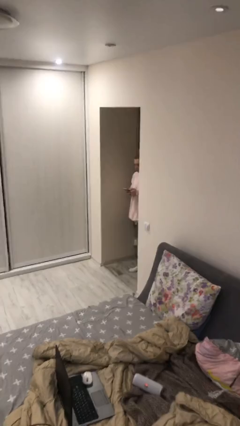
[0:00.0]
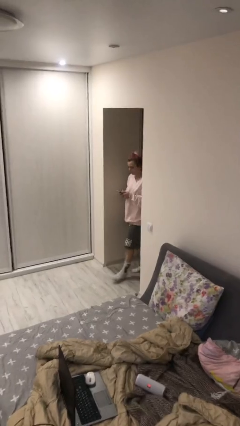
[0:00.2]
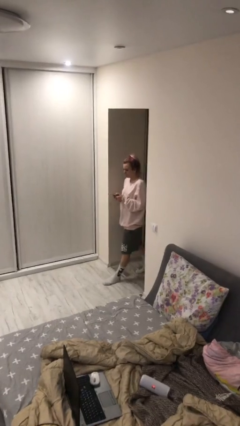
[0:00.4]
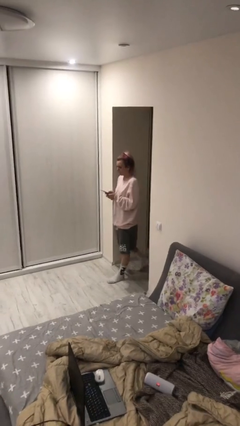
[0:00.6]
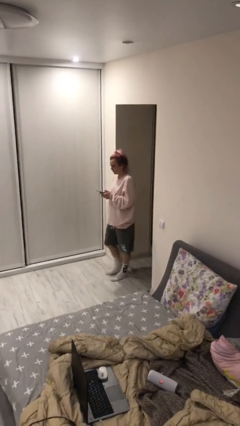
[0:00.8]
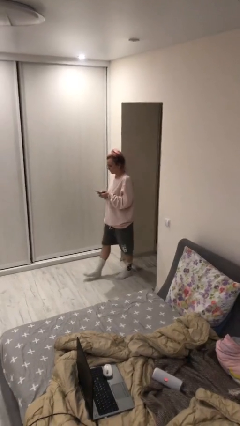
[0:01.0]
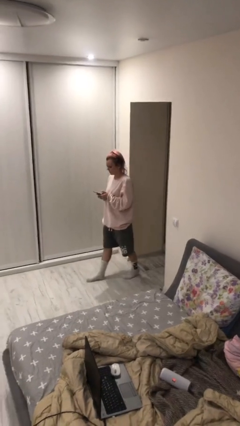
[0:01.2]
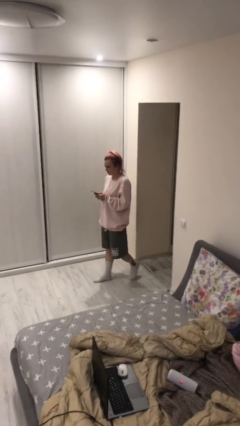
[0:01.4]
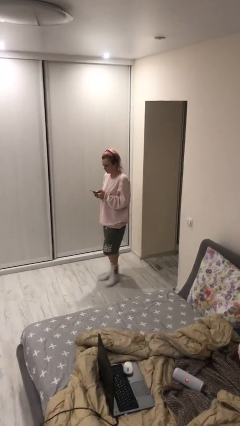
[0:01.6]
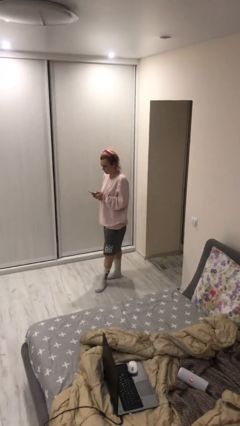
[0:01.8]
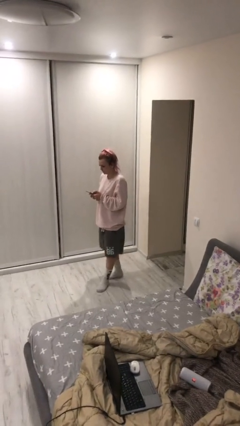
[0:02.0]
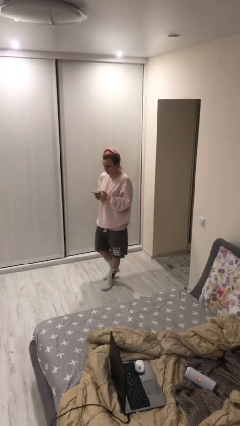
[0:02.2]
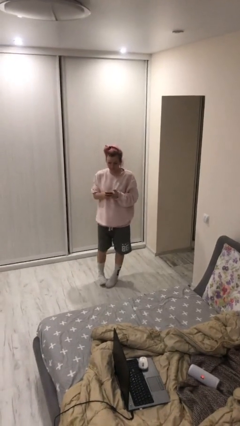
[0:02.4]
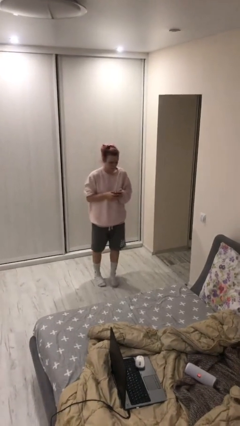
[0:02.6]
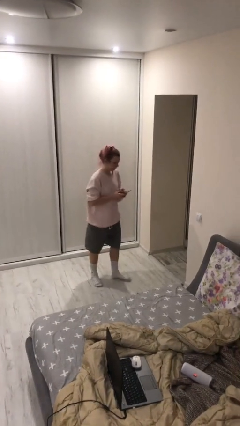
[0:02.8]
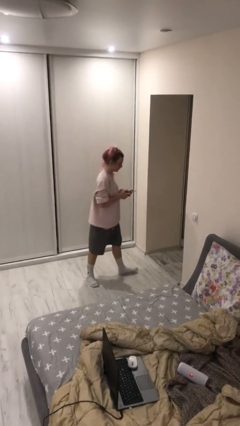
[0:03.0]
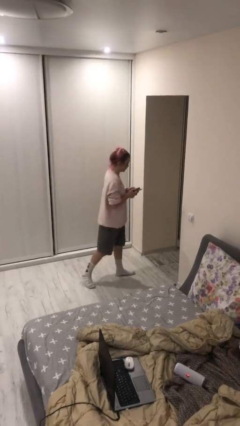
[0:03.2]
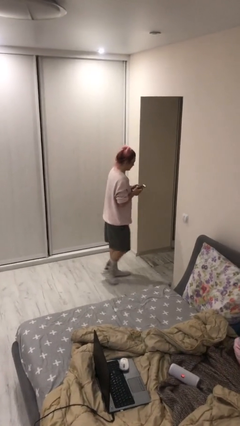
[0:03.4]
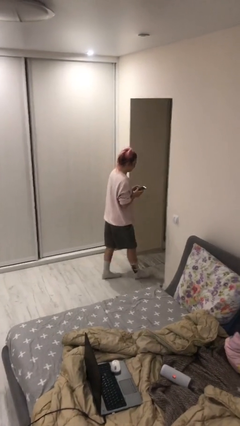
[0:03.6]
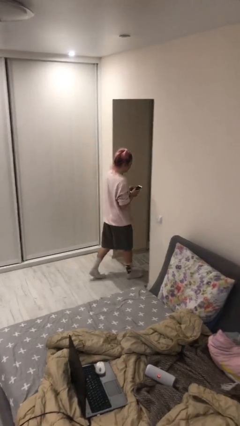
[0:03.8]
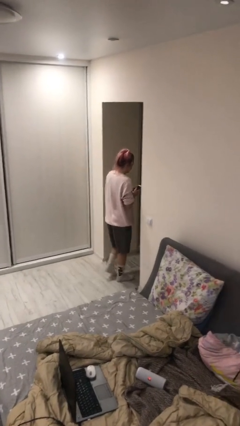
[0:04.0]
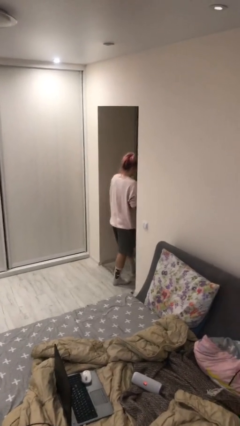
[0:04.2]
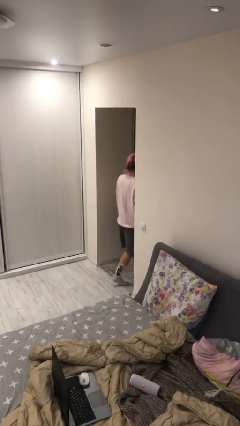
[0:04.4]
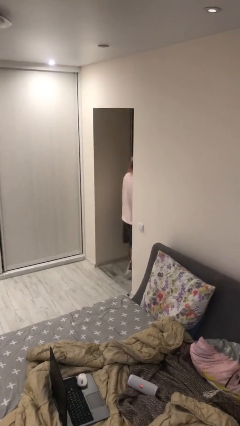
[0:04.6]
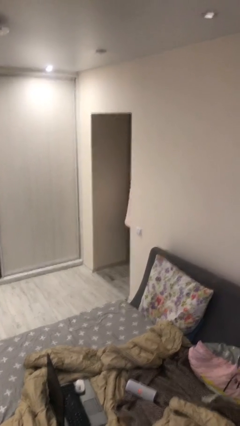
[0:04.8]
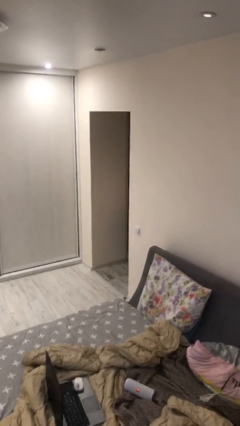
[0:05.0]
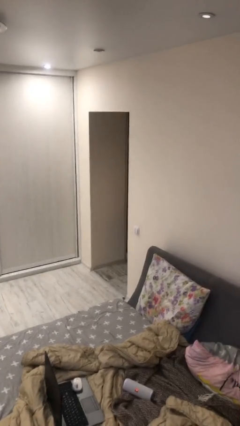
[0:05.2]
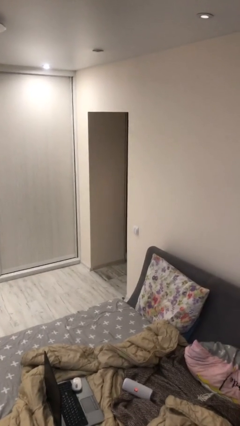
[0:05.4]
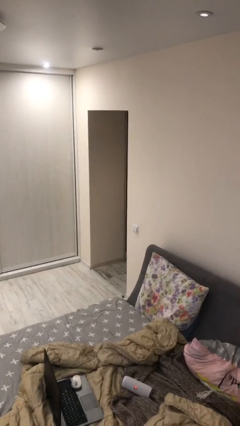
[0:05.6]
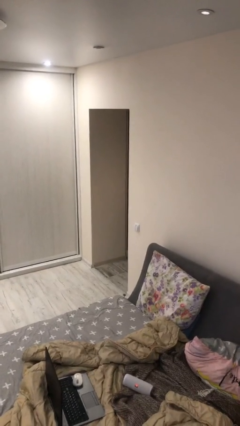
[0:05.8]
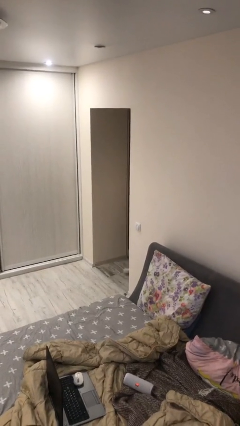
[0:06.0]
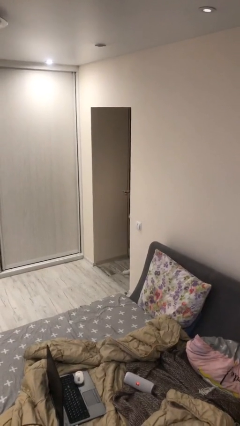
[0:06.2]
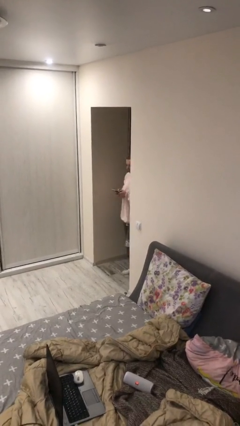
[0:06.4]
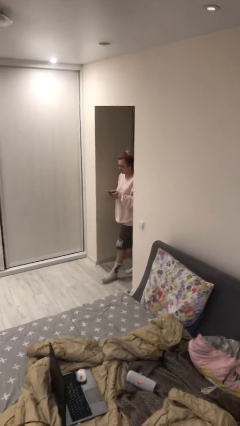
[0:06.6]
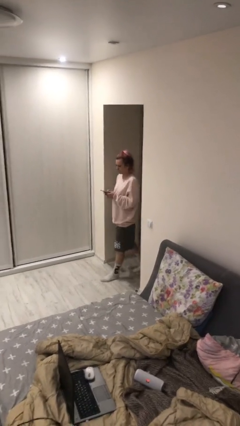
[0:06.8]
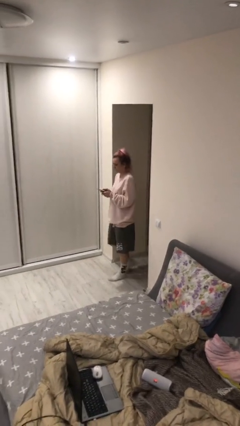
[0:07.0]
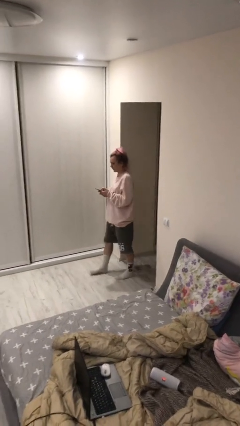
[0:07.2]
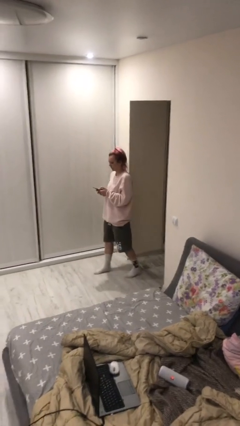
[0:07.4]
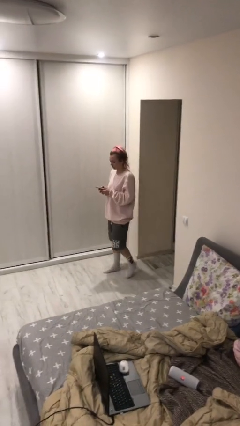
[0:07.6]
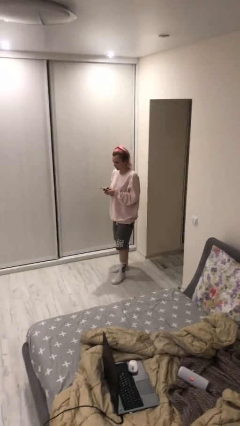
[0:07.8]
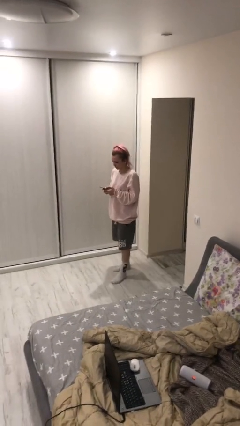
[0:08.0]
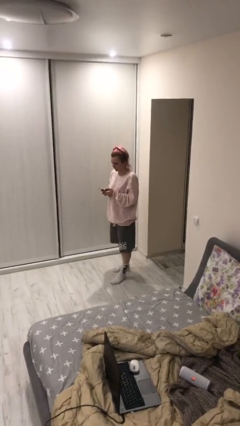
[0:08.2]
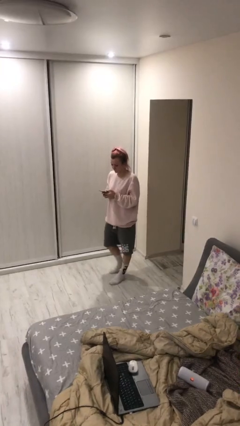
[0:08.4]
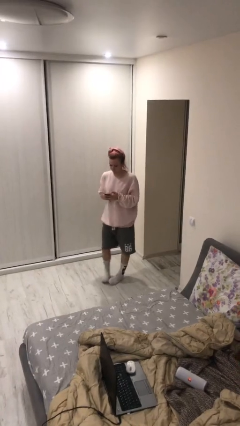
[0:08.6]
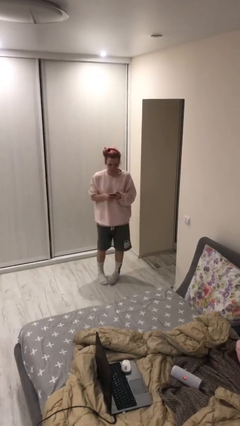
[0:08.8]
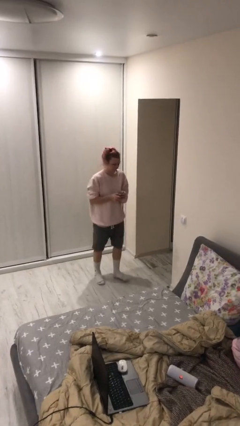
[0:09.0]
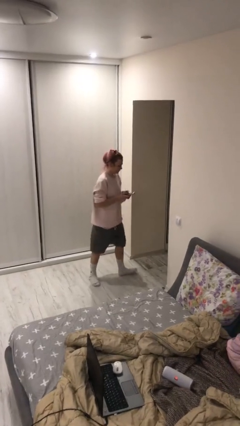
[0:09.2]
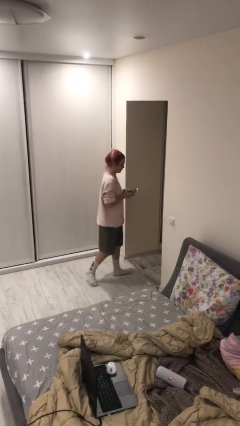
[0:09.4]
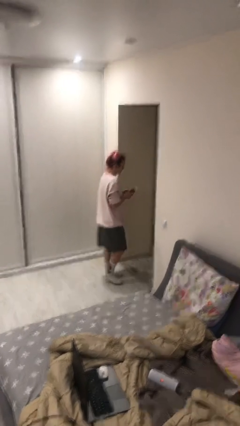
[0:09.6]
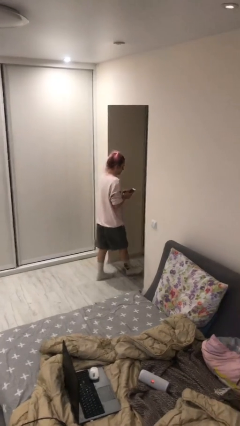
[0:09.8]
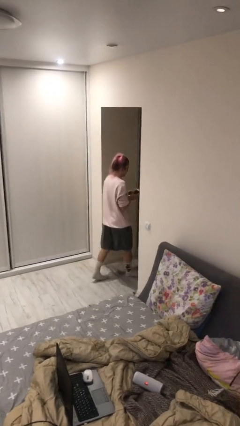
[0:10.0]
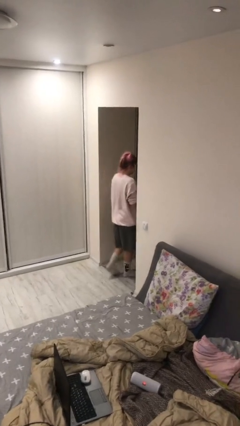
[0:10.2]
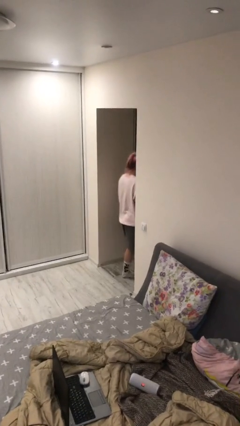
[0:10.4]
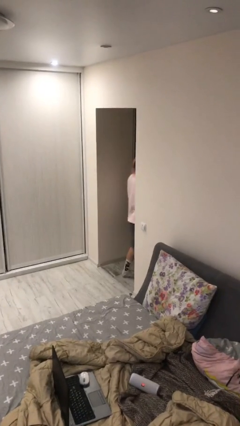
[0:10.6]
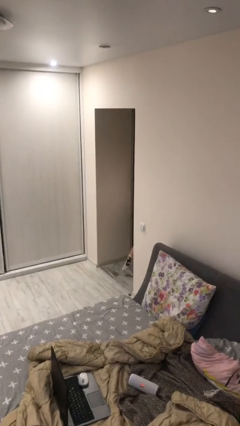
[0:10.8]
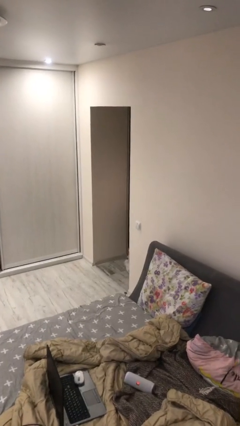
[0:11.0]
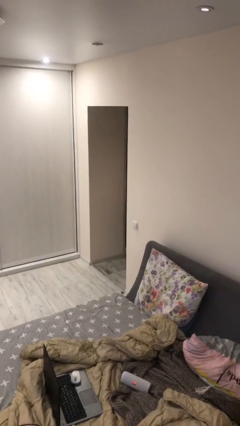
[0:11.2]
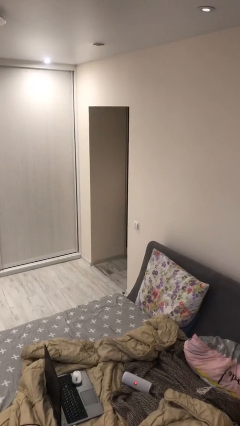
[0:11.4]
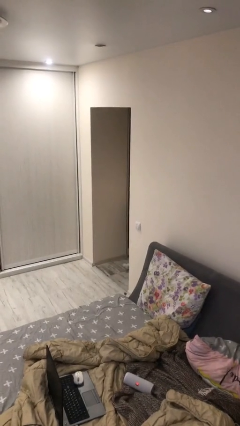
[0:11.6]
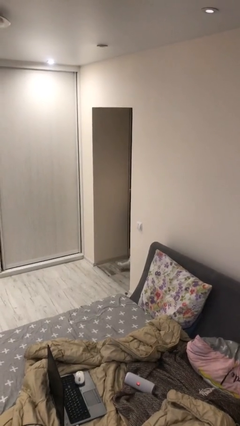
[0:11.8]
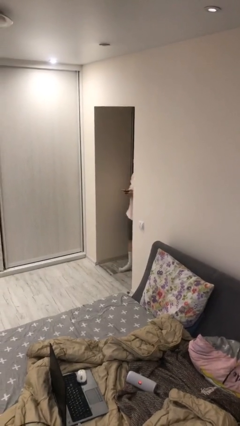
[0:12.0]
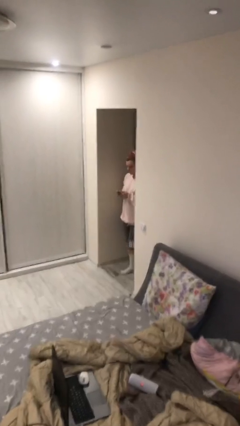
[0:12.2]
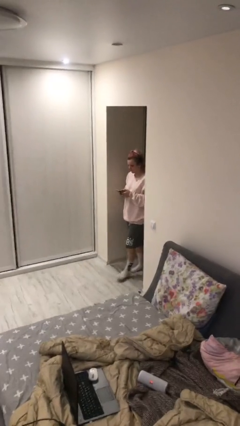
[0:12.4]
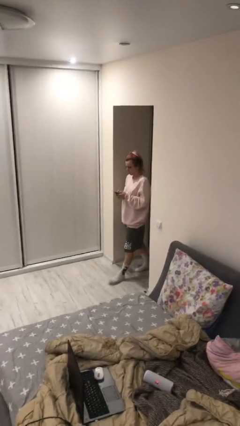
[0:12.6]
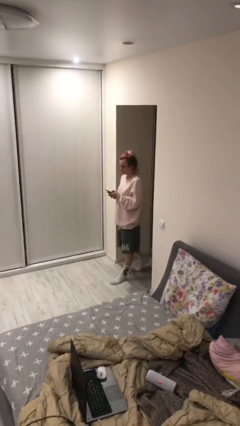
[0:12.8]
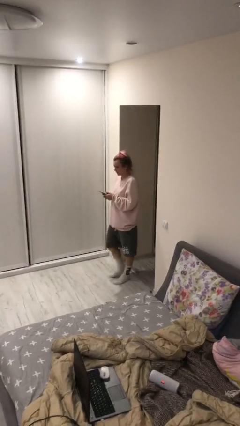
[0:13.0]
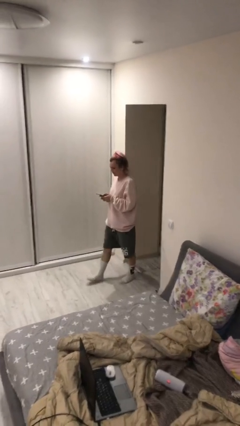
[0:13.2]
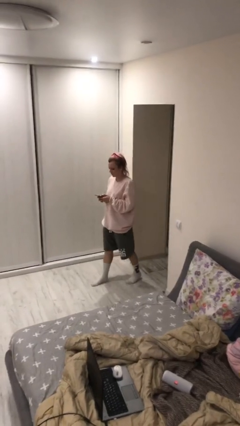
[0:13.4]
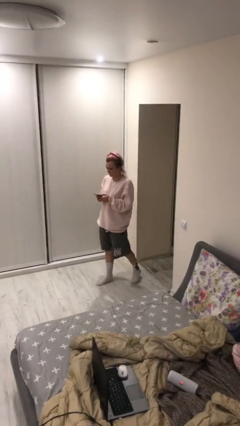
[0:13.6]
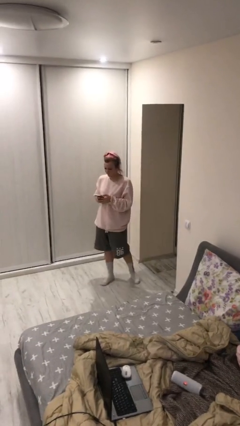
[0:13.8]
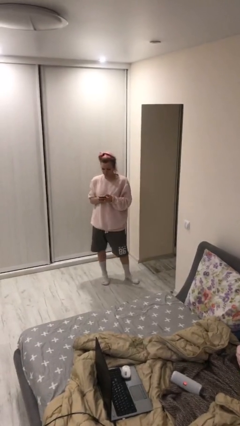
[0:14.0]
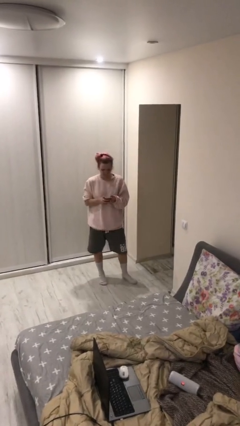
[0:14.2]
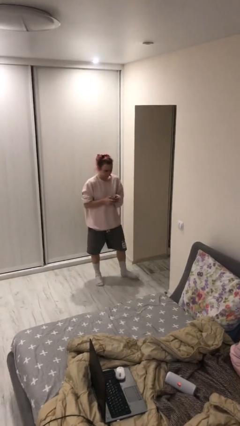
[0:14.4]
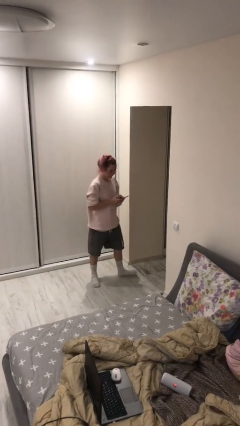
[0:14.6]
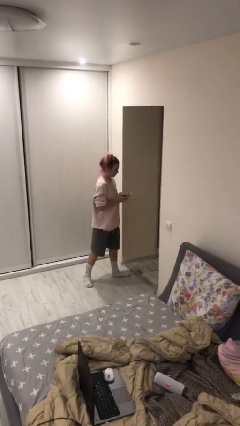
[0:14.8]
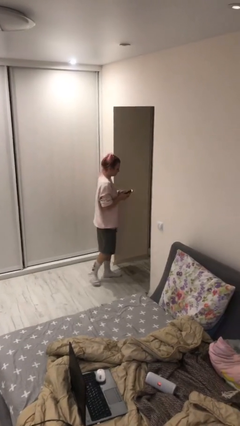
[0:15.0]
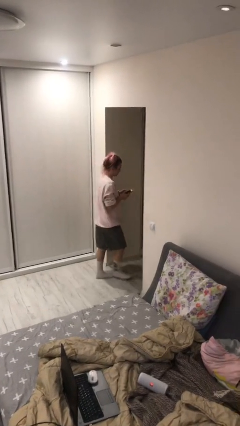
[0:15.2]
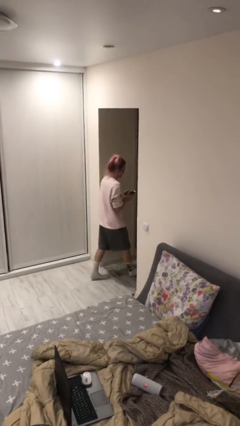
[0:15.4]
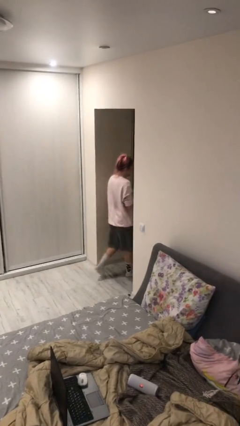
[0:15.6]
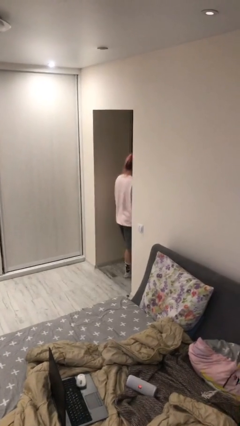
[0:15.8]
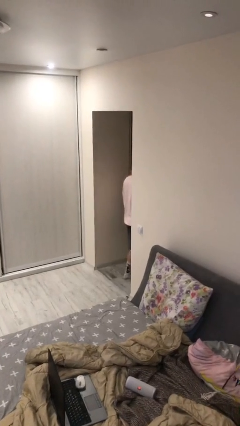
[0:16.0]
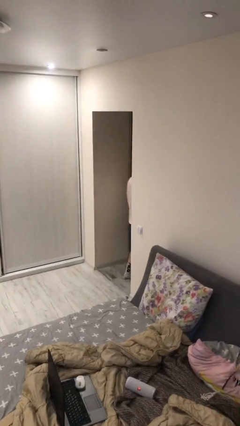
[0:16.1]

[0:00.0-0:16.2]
person texts on phone

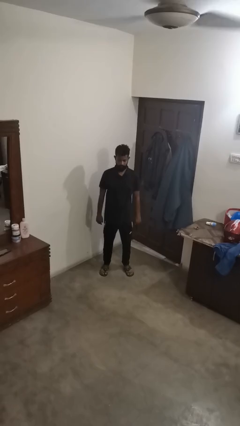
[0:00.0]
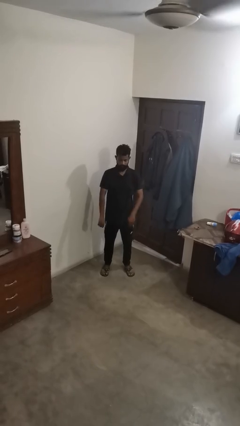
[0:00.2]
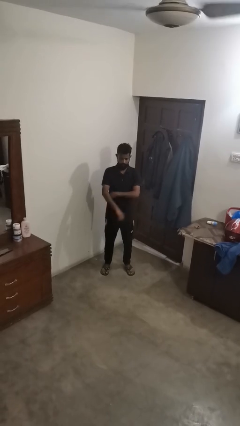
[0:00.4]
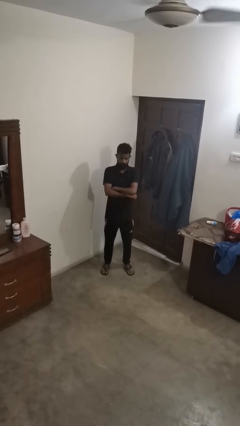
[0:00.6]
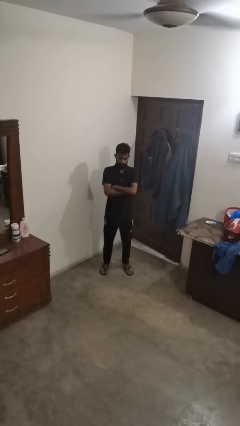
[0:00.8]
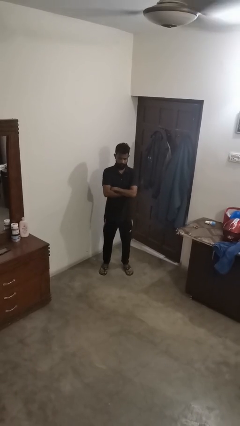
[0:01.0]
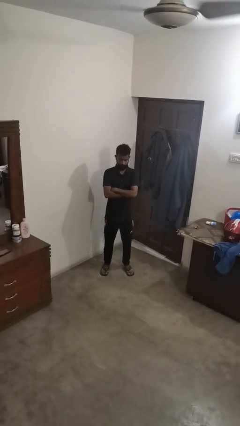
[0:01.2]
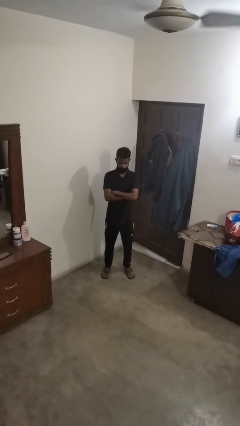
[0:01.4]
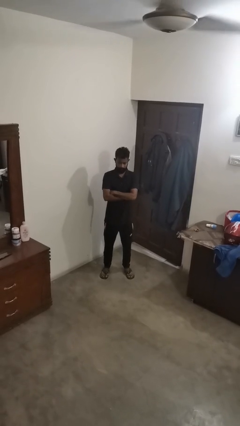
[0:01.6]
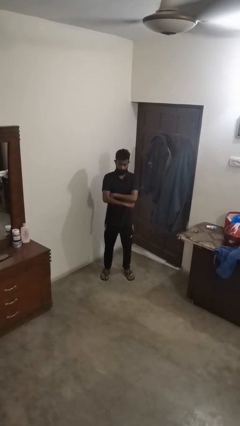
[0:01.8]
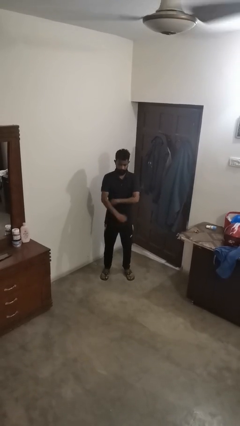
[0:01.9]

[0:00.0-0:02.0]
person crosses arms

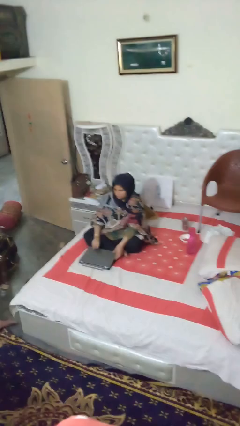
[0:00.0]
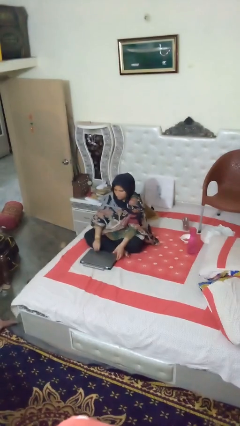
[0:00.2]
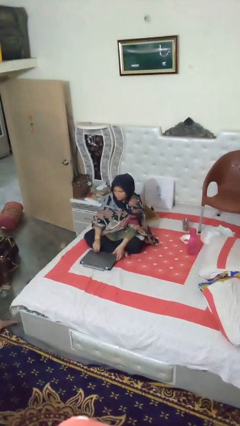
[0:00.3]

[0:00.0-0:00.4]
person closes laptop
